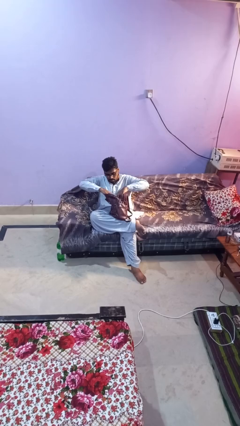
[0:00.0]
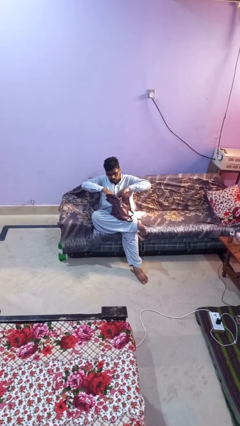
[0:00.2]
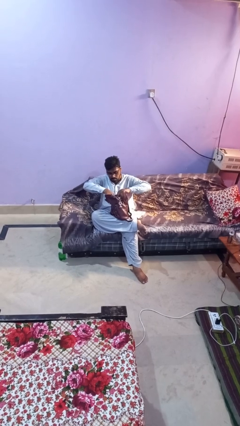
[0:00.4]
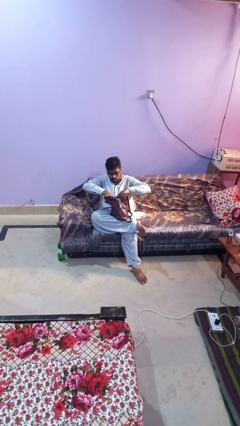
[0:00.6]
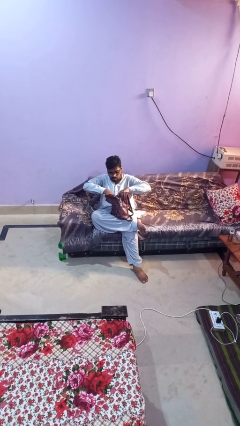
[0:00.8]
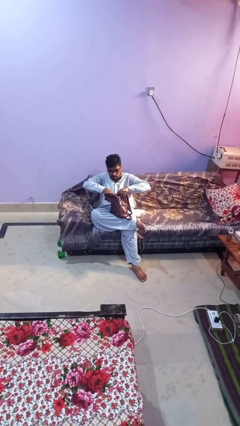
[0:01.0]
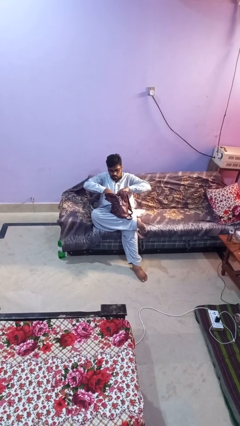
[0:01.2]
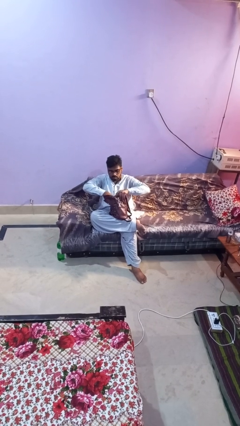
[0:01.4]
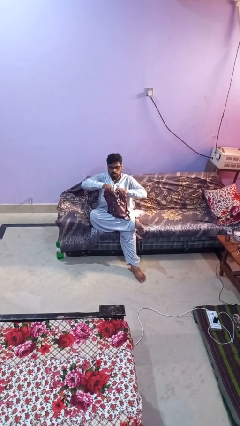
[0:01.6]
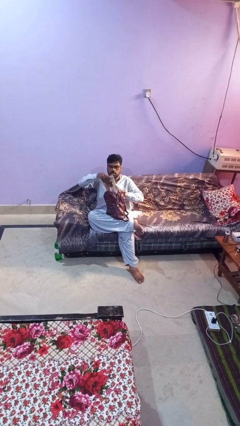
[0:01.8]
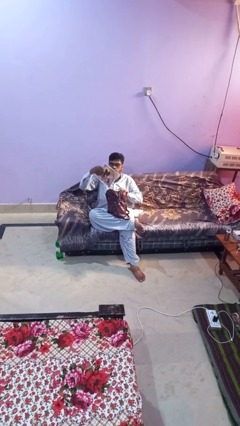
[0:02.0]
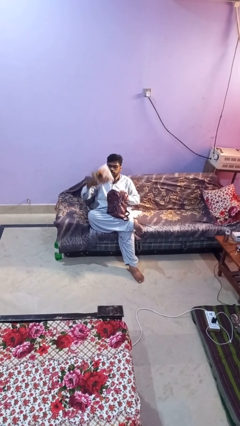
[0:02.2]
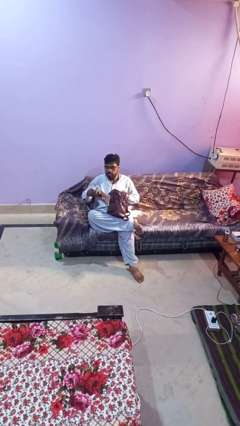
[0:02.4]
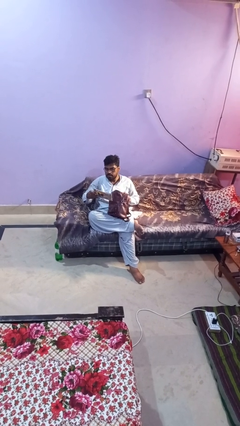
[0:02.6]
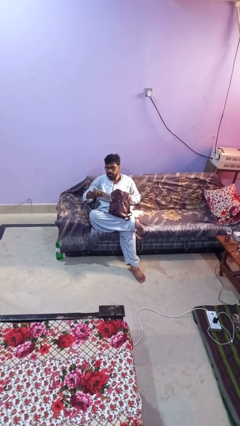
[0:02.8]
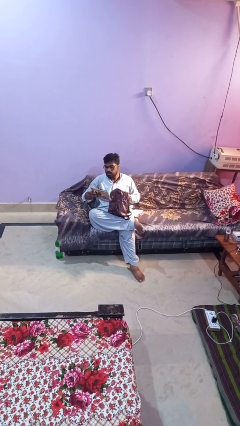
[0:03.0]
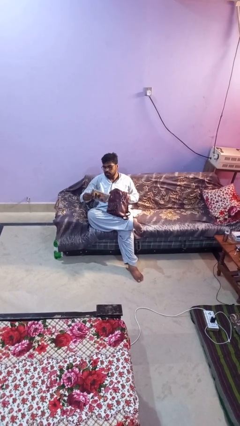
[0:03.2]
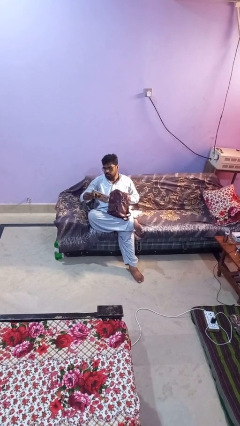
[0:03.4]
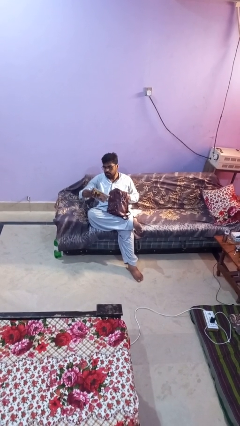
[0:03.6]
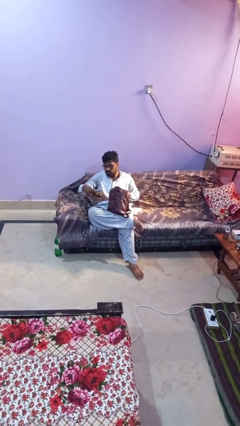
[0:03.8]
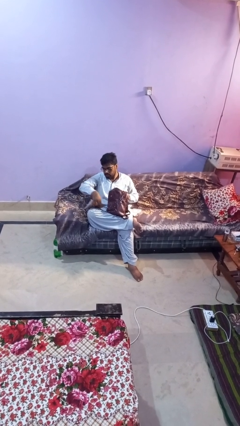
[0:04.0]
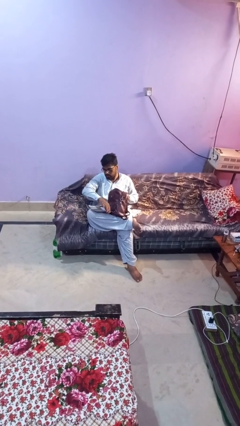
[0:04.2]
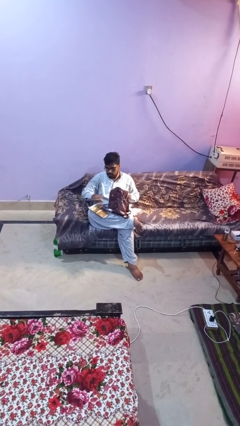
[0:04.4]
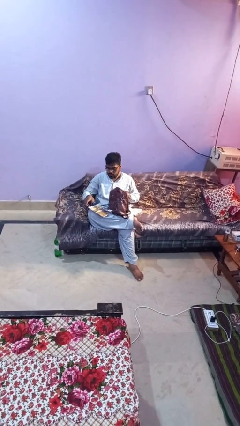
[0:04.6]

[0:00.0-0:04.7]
person takes object from backpack

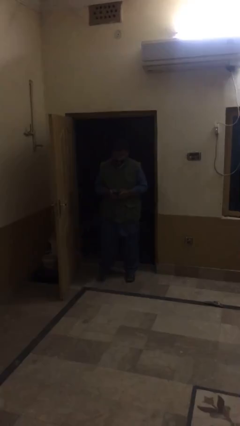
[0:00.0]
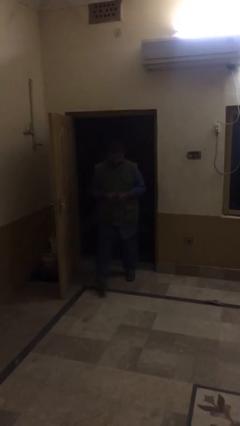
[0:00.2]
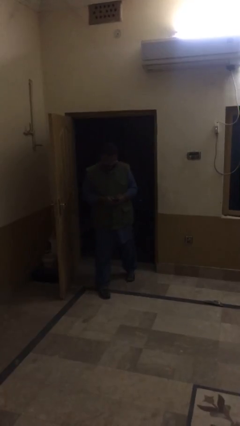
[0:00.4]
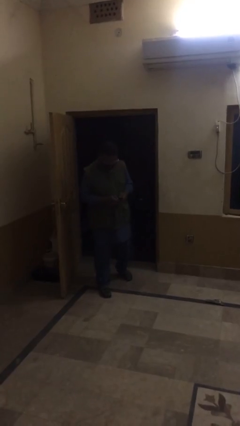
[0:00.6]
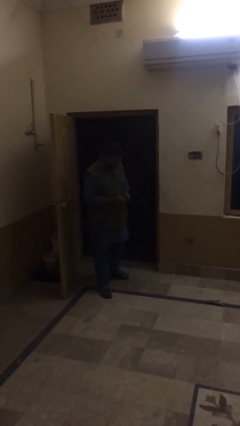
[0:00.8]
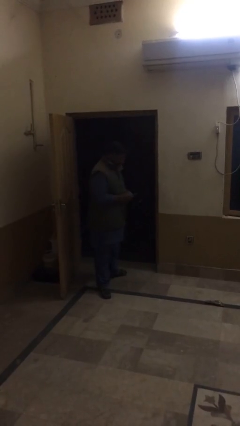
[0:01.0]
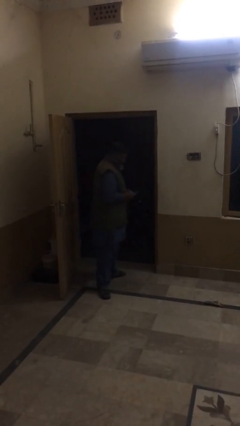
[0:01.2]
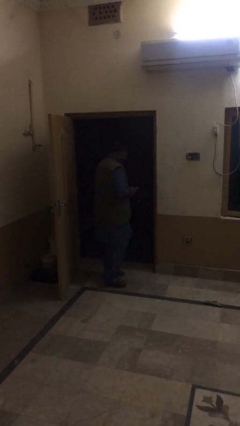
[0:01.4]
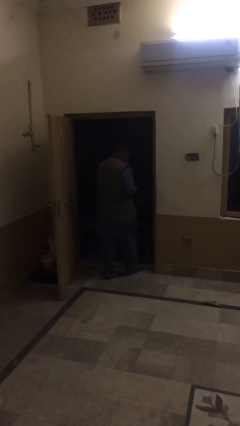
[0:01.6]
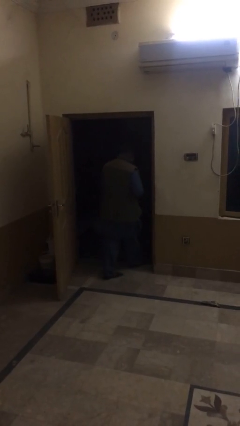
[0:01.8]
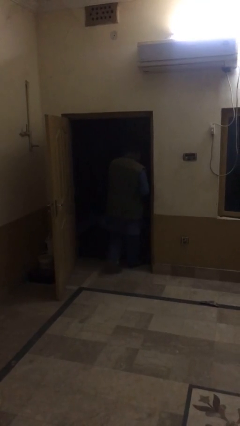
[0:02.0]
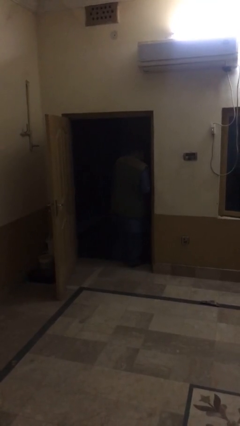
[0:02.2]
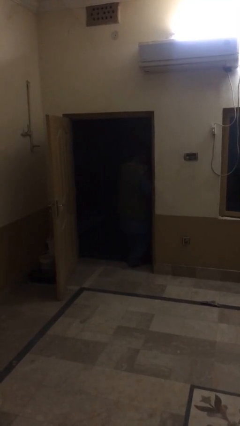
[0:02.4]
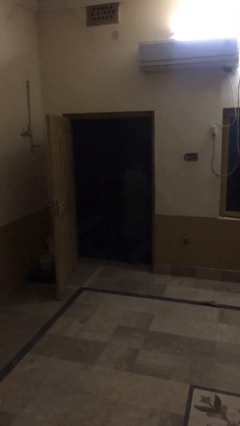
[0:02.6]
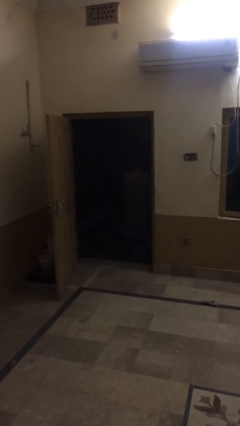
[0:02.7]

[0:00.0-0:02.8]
person exits scene through structure

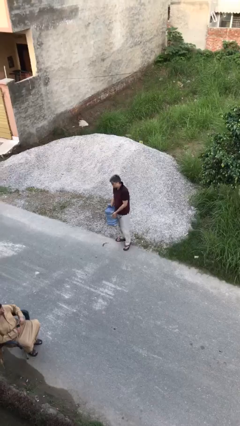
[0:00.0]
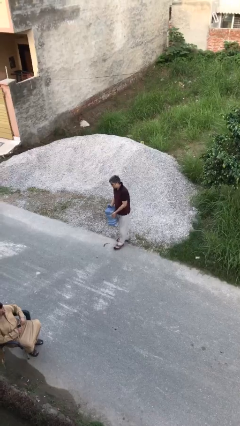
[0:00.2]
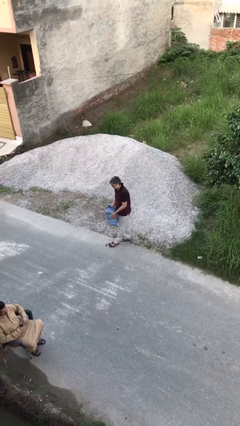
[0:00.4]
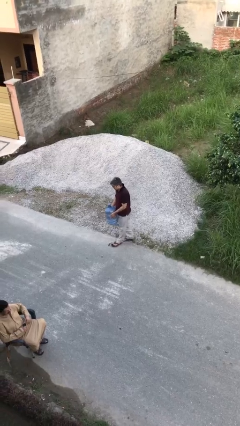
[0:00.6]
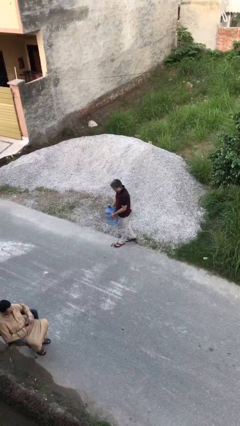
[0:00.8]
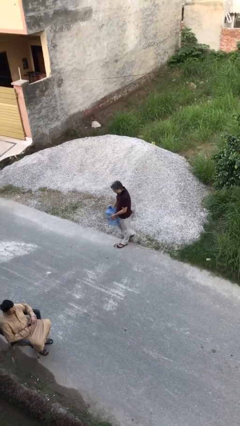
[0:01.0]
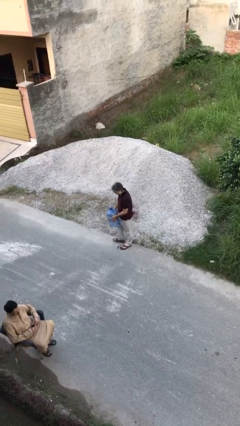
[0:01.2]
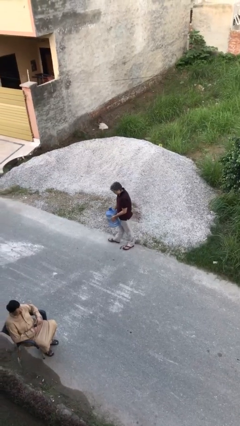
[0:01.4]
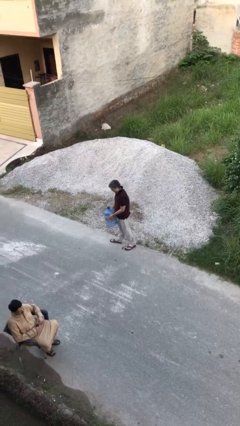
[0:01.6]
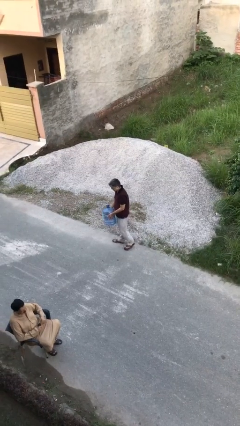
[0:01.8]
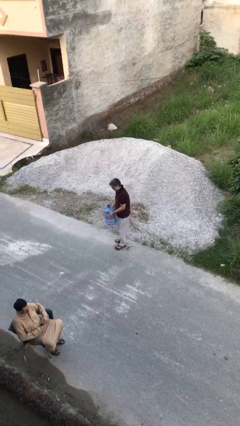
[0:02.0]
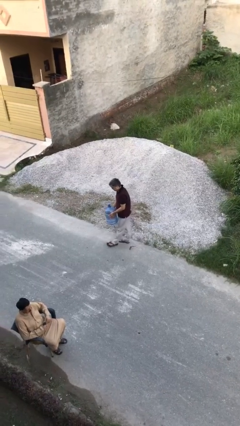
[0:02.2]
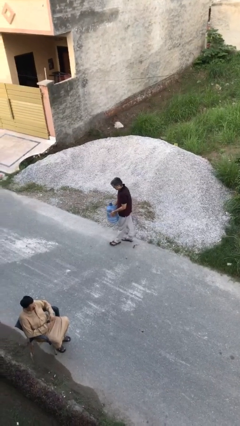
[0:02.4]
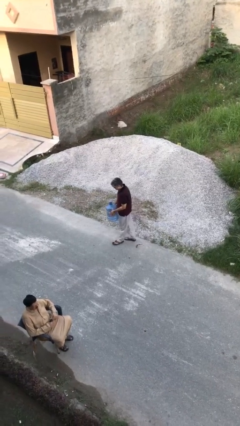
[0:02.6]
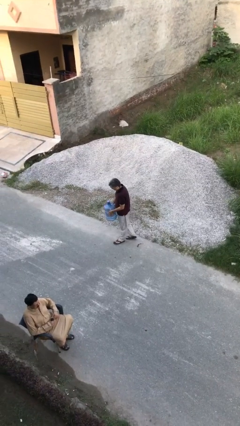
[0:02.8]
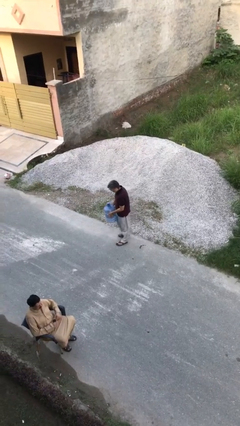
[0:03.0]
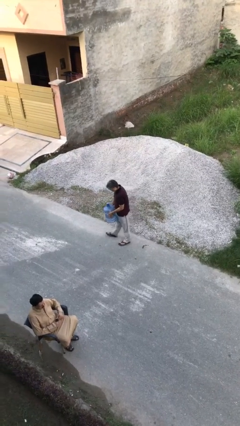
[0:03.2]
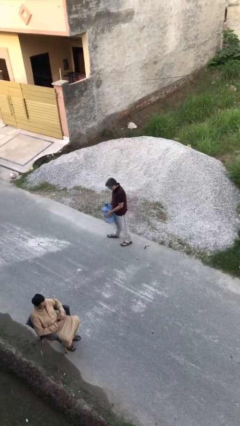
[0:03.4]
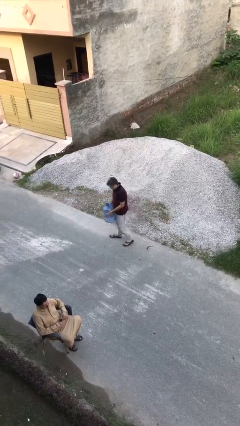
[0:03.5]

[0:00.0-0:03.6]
person carries heavy object

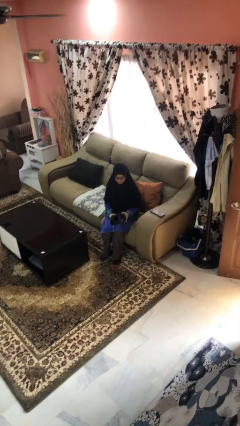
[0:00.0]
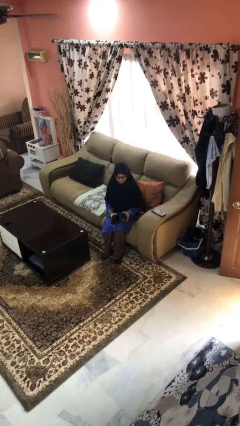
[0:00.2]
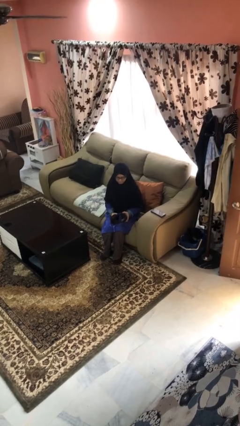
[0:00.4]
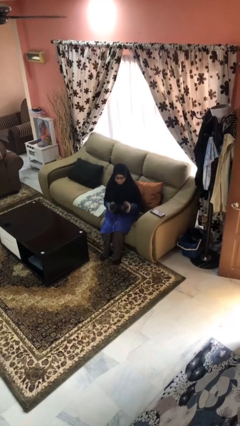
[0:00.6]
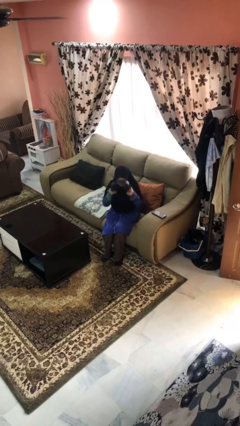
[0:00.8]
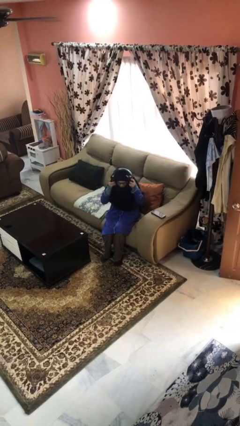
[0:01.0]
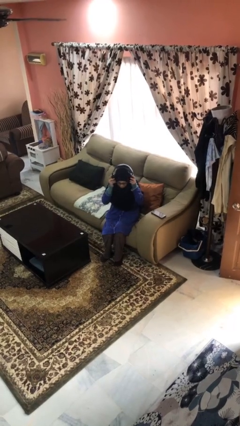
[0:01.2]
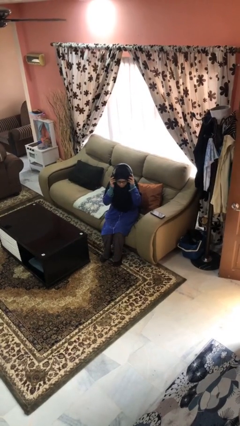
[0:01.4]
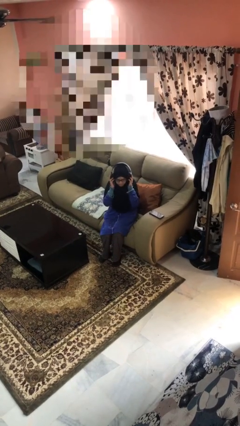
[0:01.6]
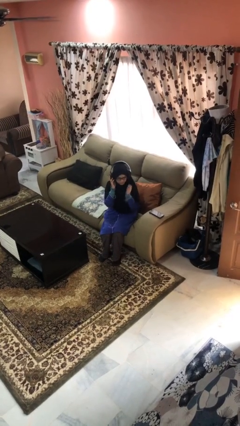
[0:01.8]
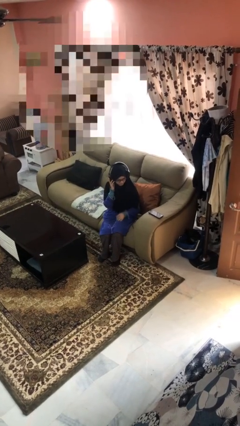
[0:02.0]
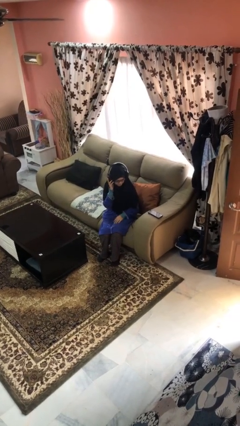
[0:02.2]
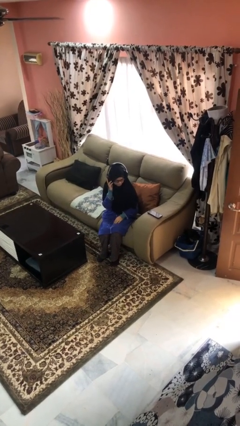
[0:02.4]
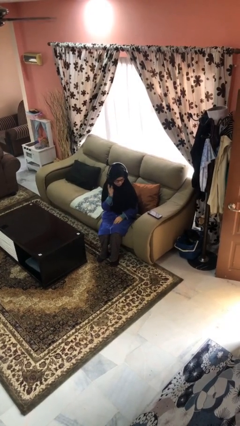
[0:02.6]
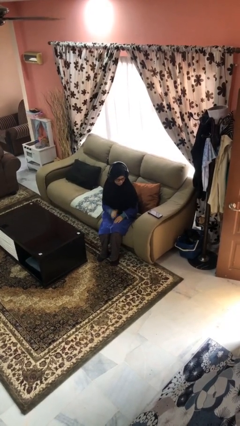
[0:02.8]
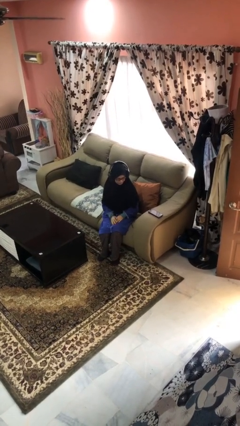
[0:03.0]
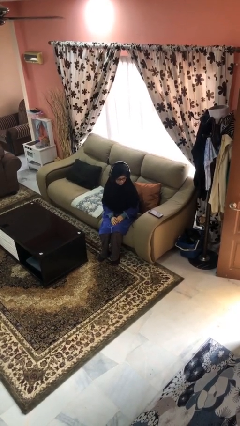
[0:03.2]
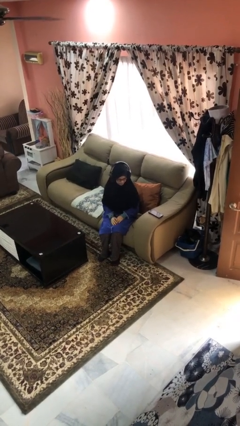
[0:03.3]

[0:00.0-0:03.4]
person puts on headphones

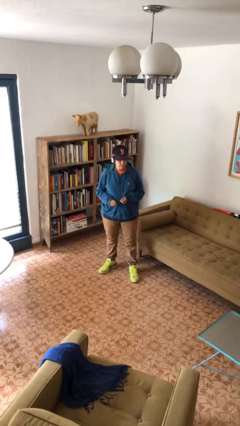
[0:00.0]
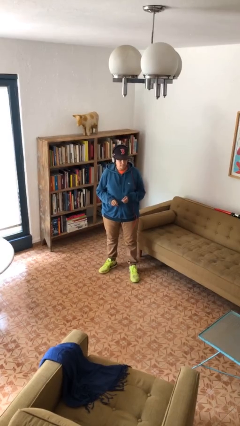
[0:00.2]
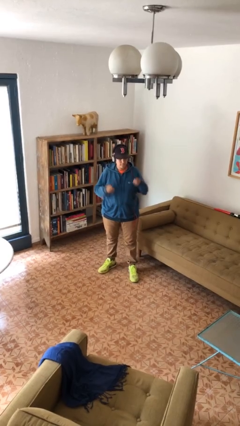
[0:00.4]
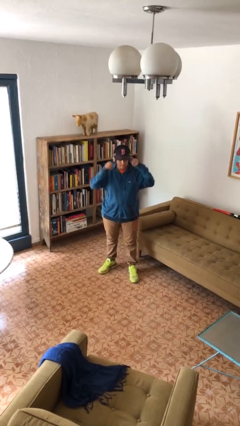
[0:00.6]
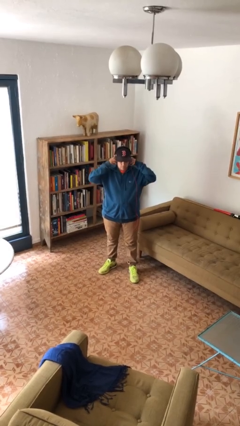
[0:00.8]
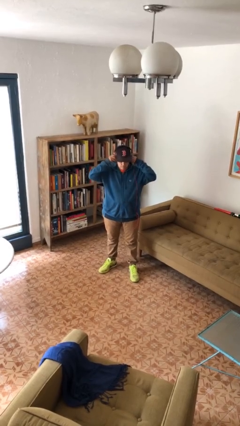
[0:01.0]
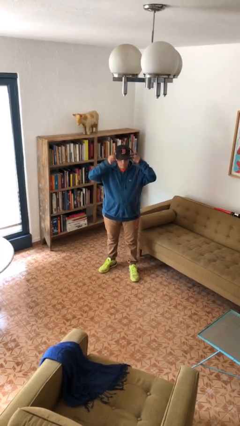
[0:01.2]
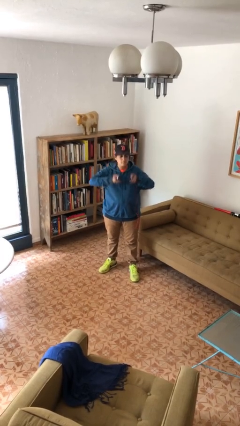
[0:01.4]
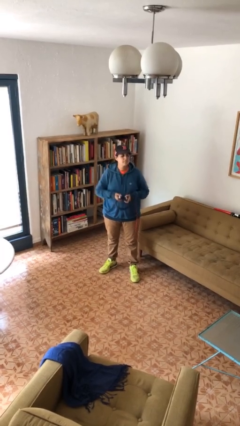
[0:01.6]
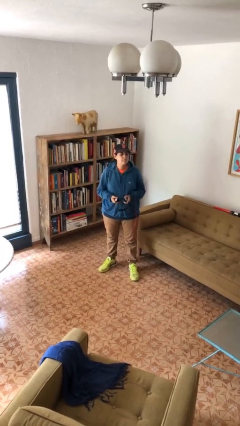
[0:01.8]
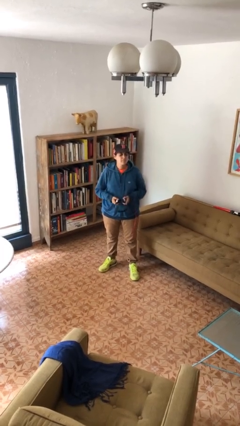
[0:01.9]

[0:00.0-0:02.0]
person takes off headphones

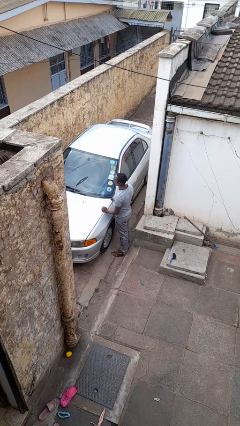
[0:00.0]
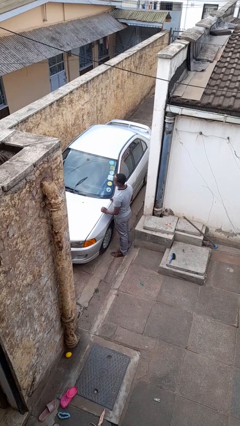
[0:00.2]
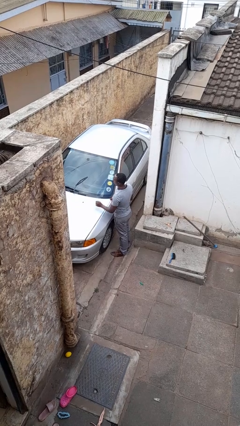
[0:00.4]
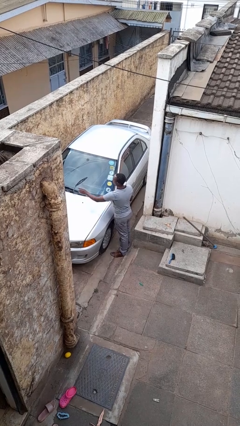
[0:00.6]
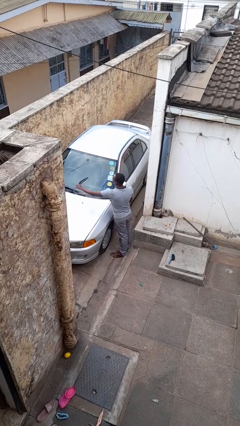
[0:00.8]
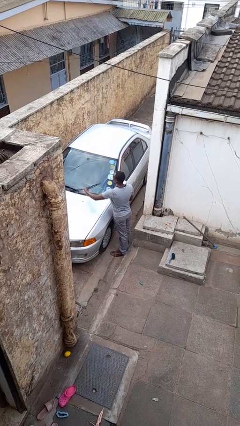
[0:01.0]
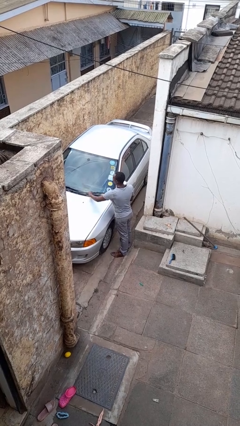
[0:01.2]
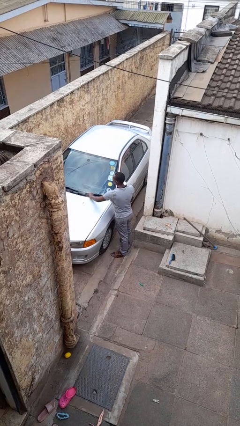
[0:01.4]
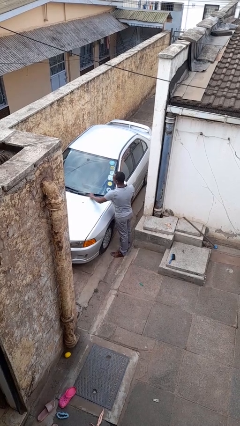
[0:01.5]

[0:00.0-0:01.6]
person flips down car wipers
